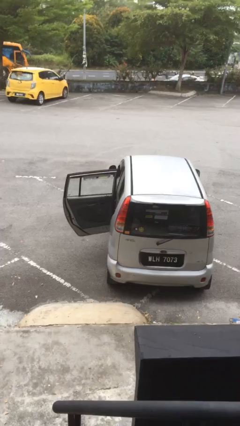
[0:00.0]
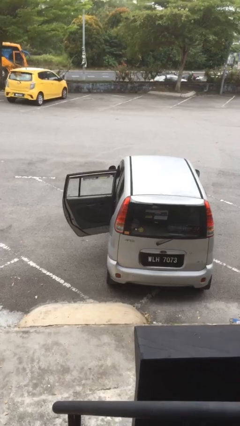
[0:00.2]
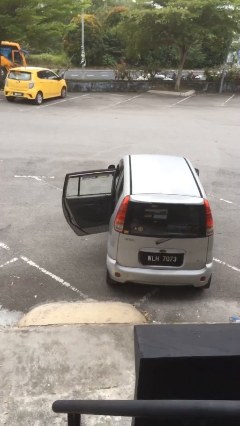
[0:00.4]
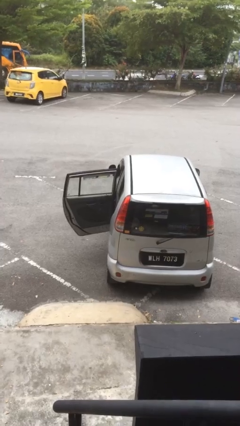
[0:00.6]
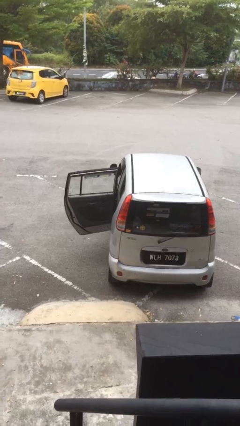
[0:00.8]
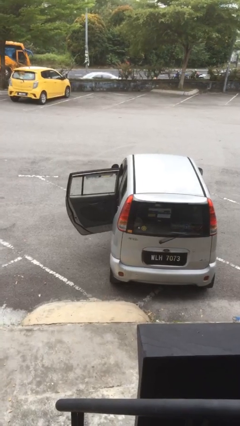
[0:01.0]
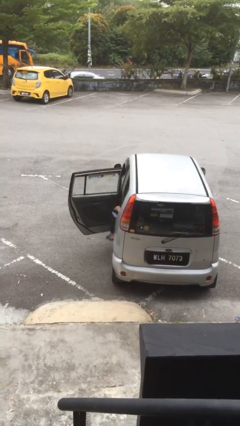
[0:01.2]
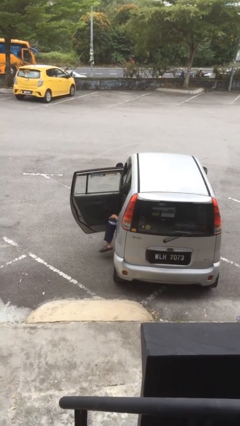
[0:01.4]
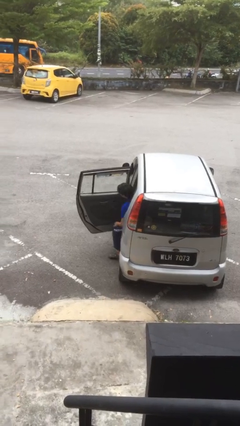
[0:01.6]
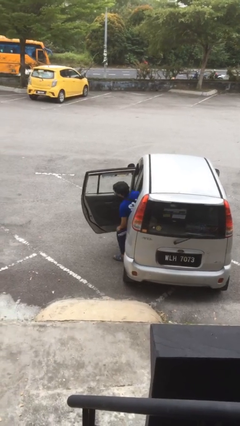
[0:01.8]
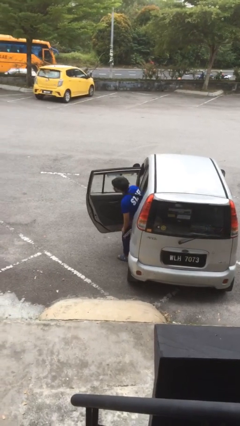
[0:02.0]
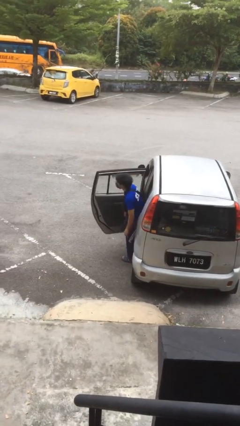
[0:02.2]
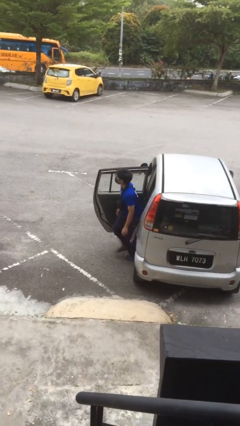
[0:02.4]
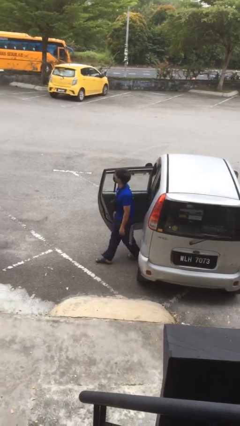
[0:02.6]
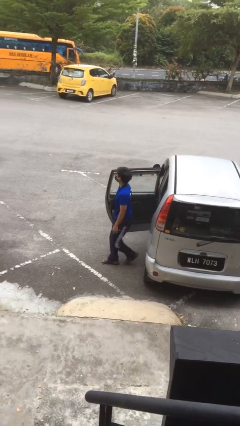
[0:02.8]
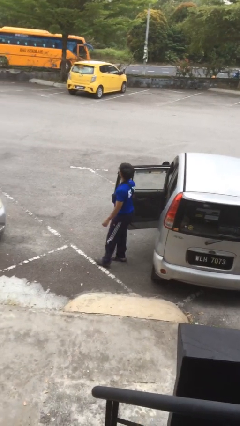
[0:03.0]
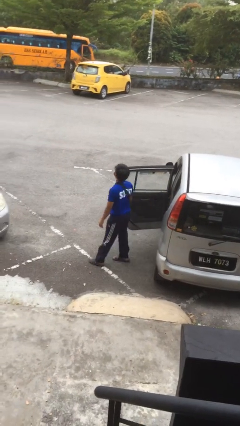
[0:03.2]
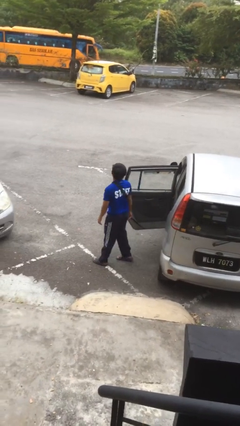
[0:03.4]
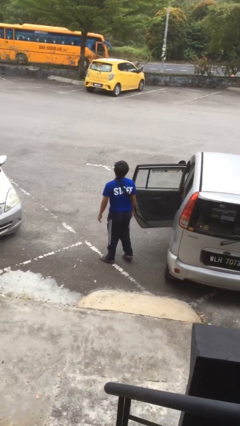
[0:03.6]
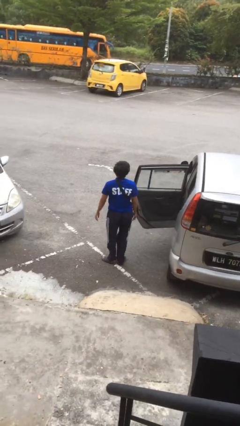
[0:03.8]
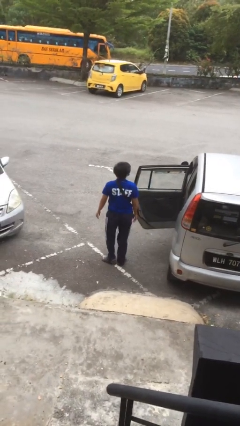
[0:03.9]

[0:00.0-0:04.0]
person exits car

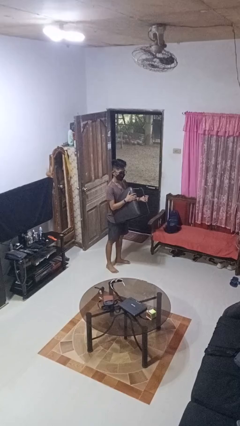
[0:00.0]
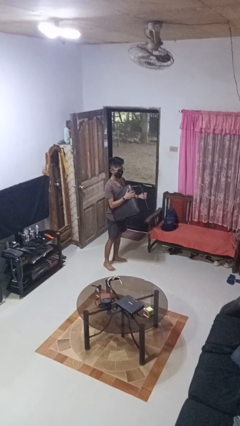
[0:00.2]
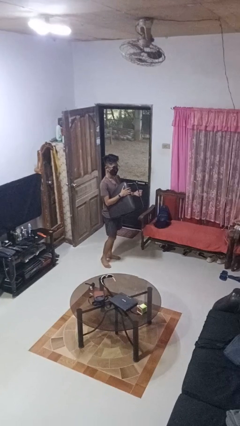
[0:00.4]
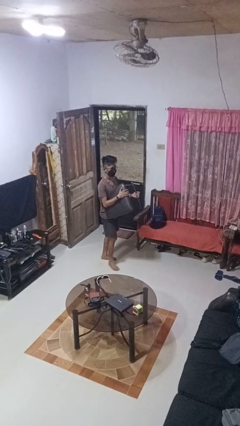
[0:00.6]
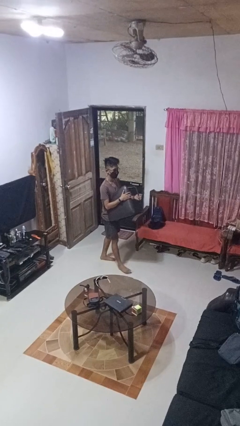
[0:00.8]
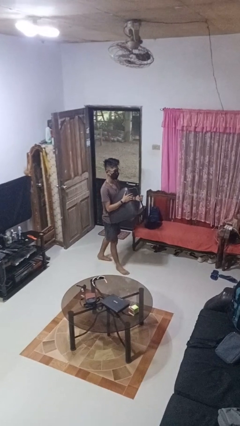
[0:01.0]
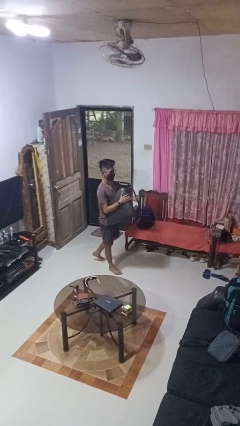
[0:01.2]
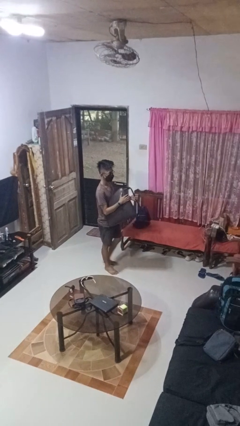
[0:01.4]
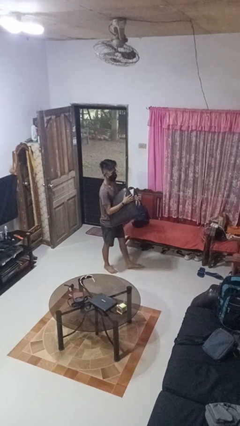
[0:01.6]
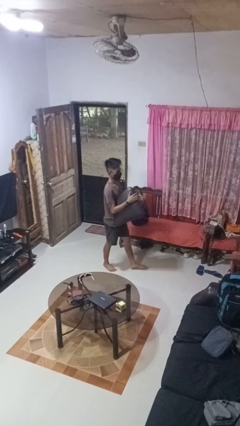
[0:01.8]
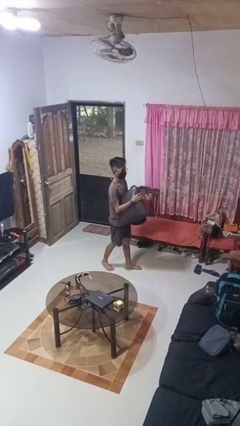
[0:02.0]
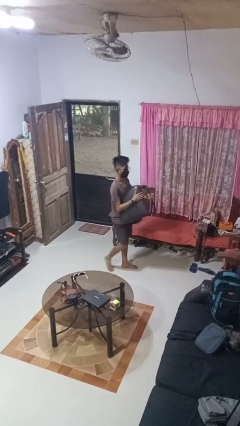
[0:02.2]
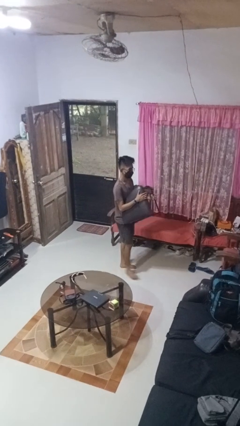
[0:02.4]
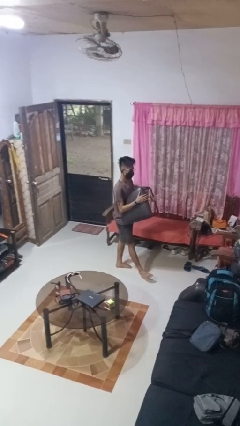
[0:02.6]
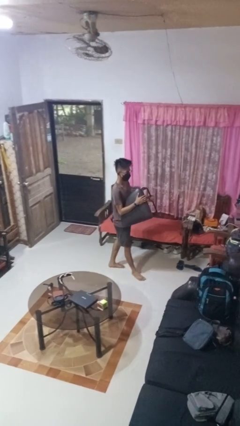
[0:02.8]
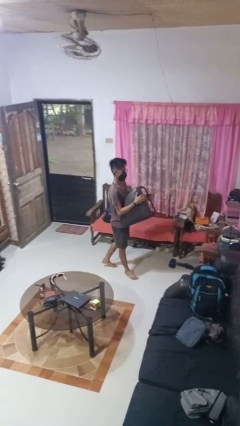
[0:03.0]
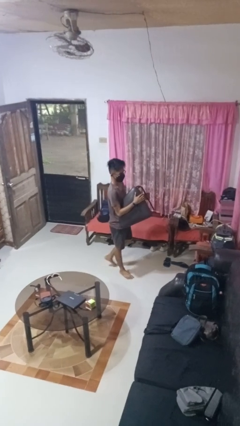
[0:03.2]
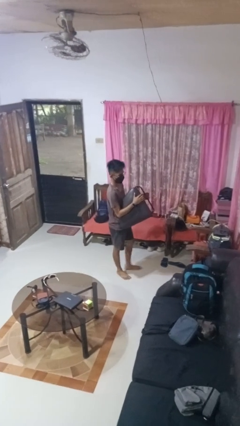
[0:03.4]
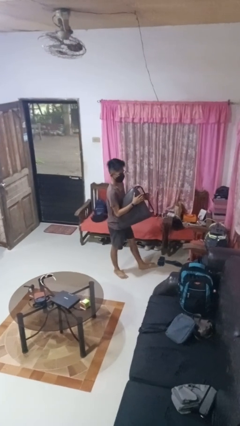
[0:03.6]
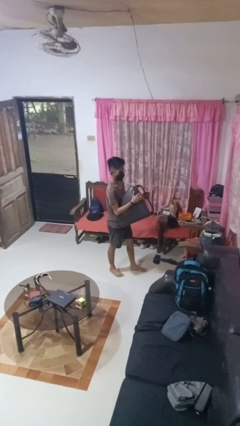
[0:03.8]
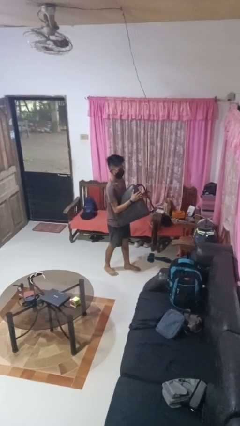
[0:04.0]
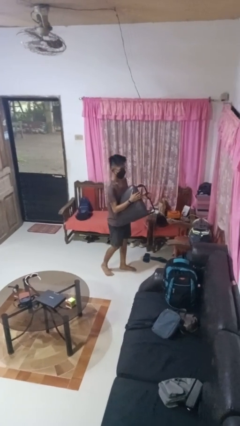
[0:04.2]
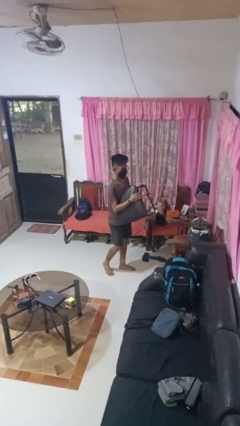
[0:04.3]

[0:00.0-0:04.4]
person carries furniture

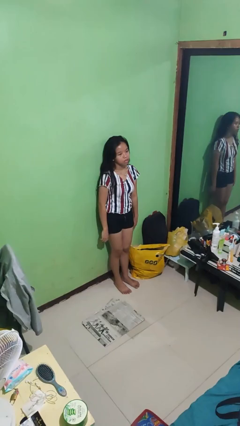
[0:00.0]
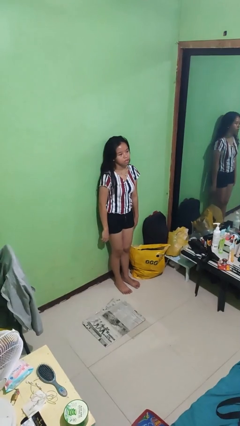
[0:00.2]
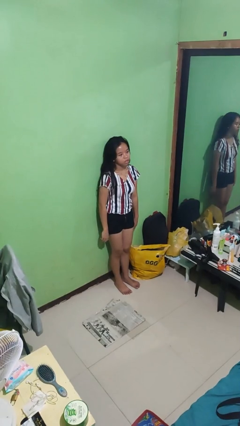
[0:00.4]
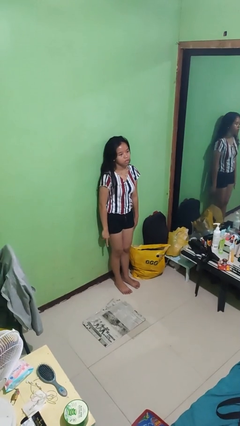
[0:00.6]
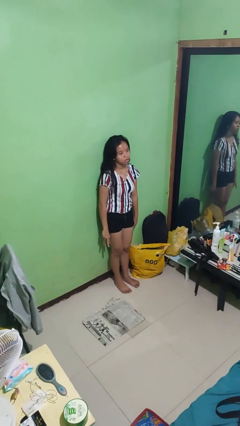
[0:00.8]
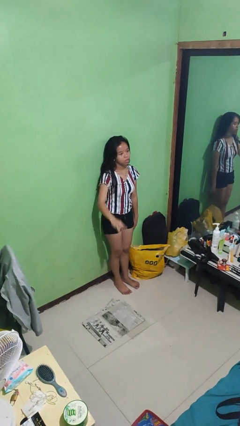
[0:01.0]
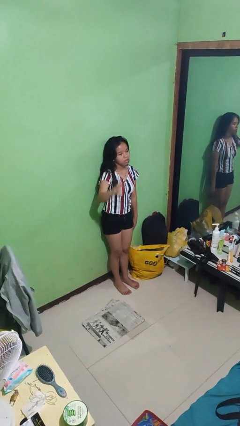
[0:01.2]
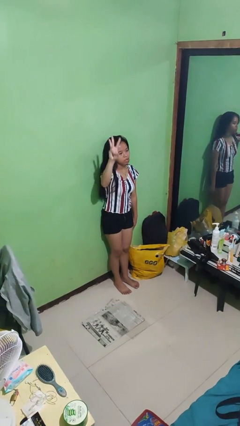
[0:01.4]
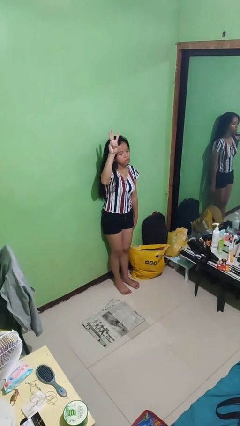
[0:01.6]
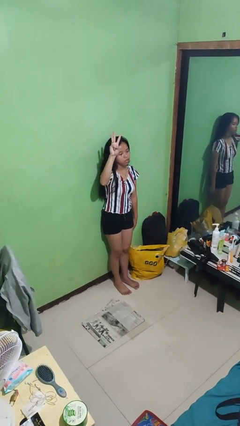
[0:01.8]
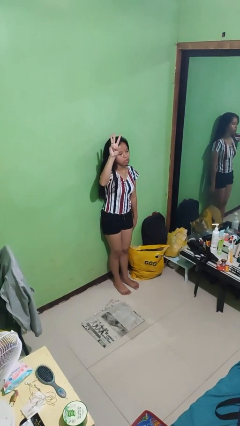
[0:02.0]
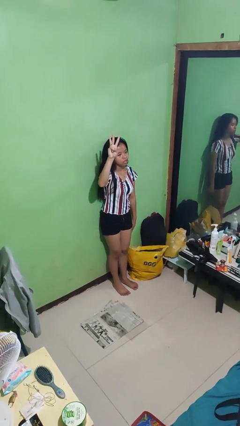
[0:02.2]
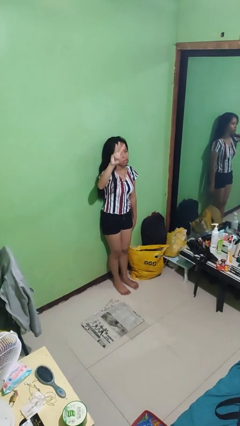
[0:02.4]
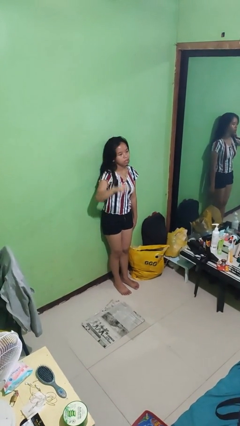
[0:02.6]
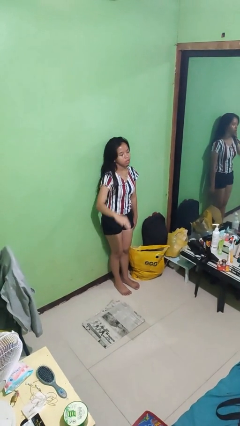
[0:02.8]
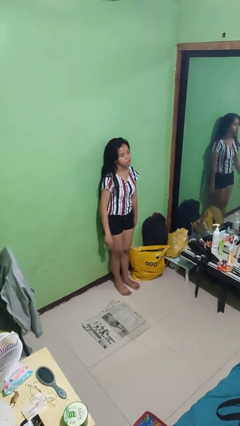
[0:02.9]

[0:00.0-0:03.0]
person gestures number three

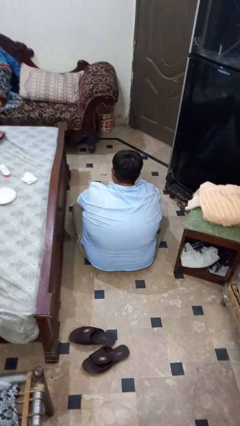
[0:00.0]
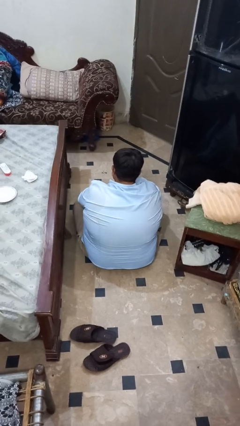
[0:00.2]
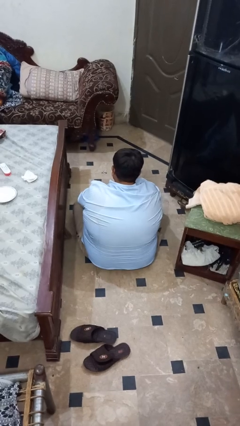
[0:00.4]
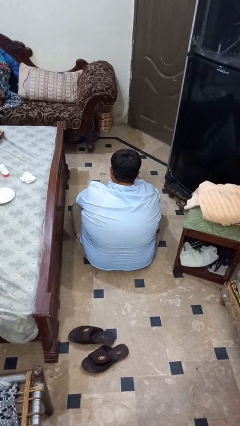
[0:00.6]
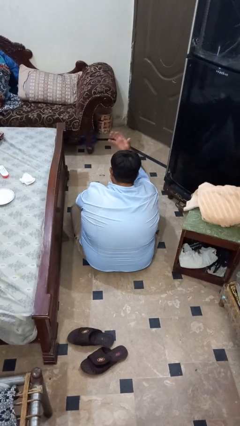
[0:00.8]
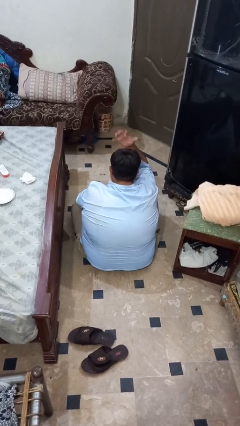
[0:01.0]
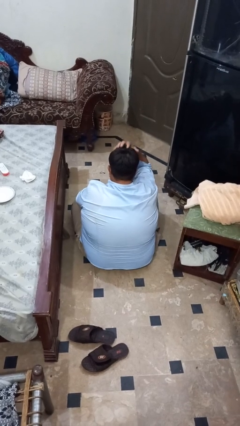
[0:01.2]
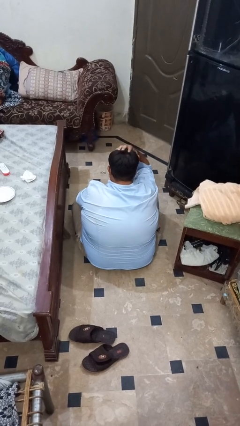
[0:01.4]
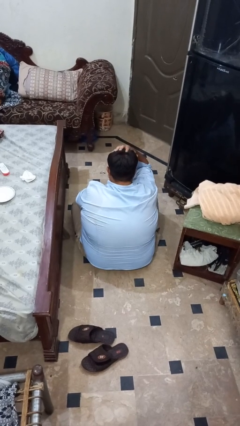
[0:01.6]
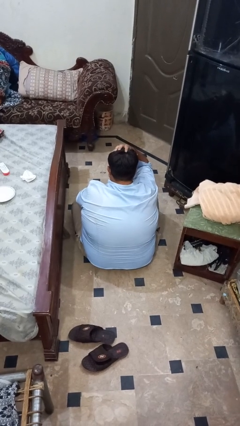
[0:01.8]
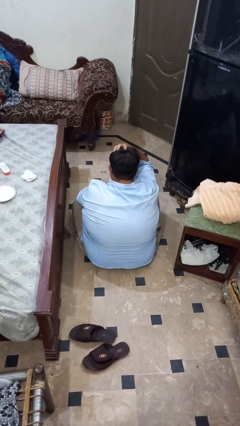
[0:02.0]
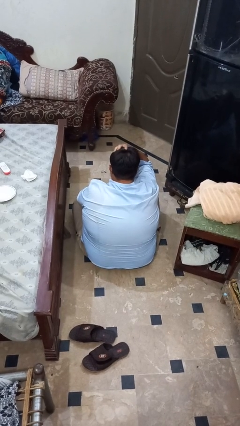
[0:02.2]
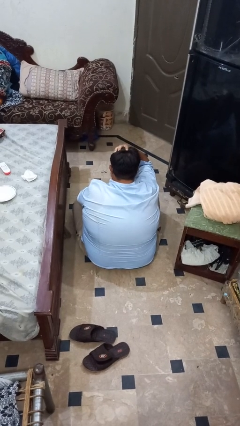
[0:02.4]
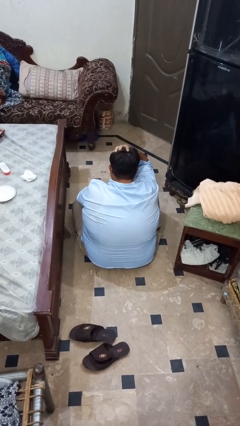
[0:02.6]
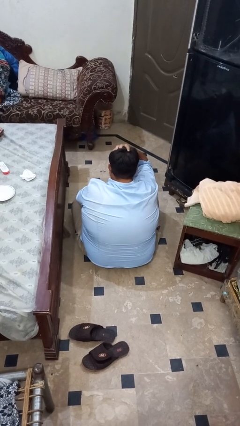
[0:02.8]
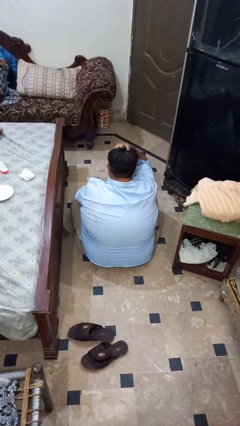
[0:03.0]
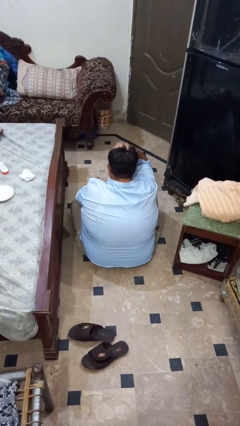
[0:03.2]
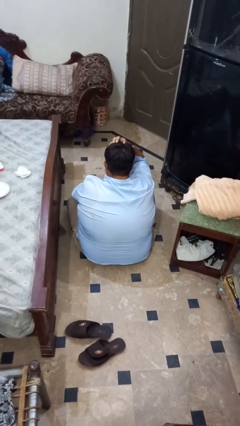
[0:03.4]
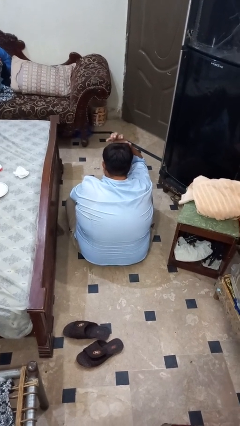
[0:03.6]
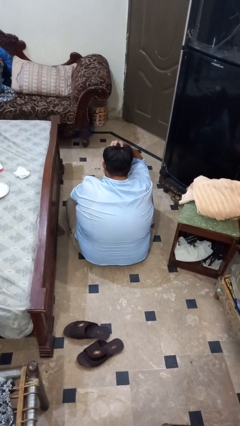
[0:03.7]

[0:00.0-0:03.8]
person pats head

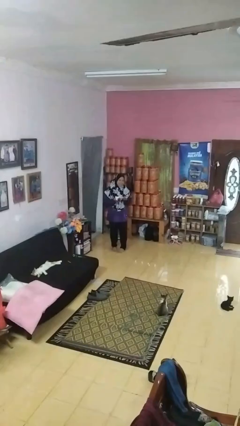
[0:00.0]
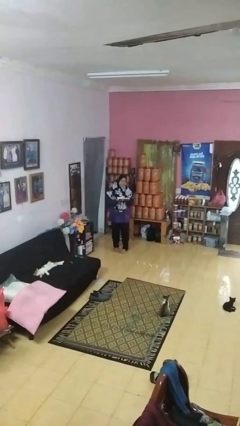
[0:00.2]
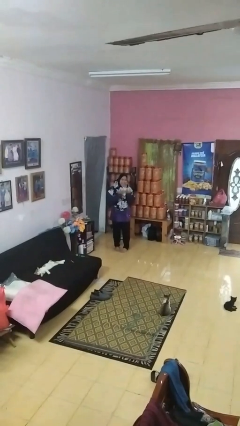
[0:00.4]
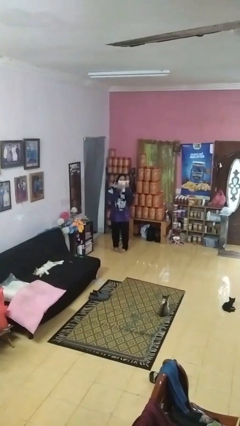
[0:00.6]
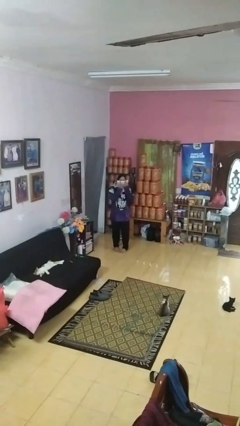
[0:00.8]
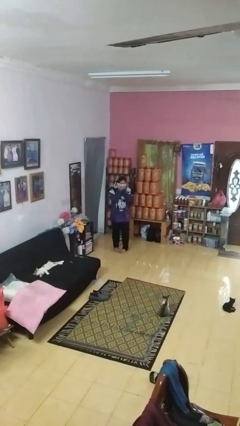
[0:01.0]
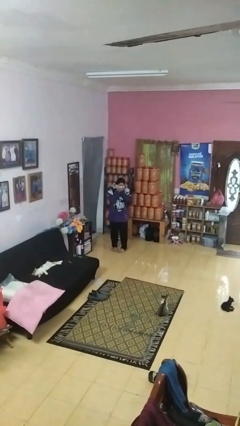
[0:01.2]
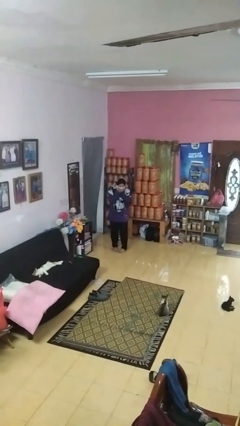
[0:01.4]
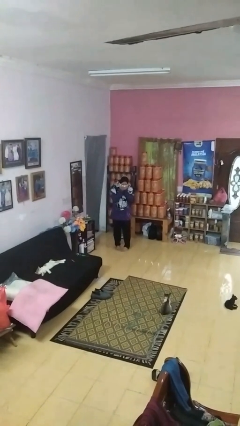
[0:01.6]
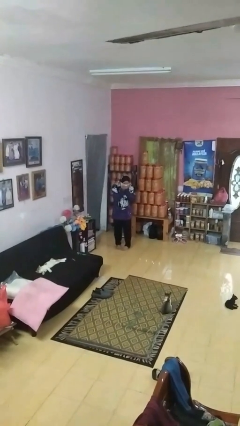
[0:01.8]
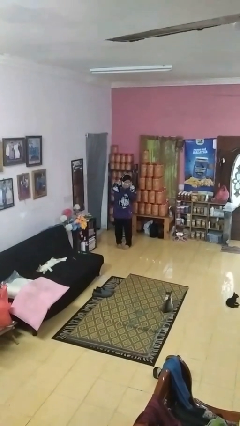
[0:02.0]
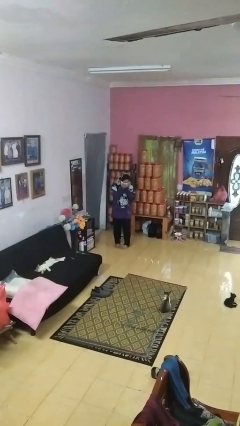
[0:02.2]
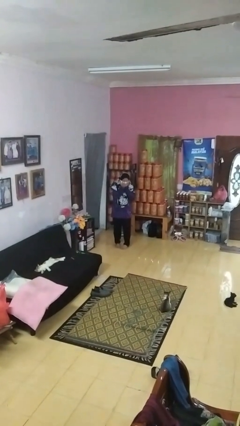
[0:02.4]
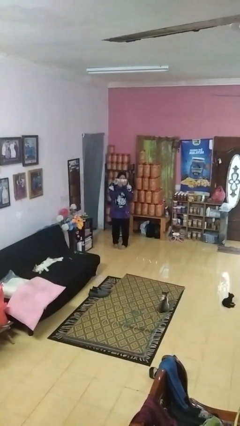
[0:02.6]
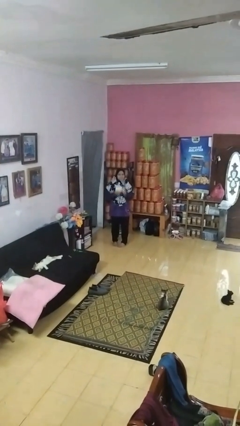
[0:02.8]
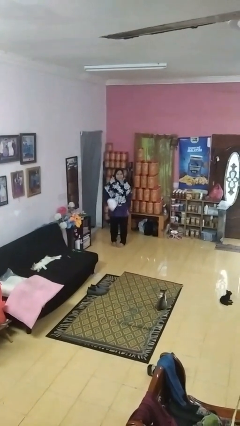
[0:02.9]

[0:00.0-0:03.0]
person blows nose
